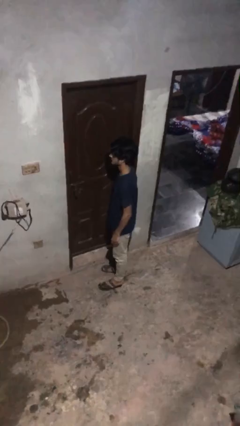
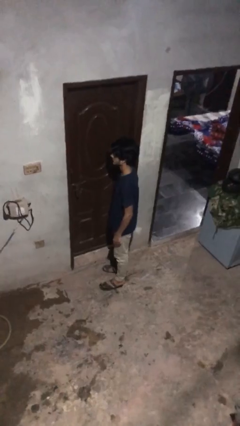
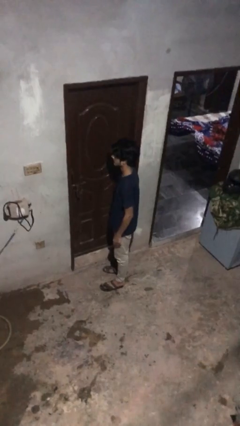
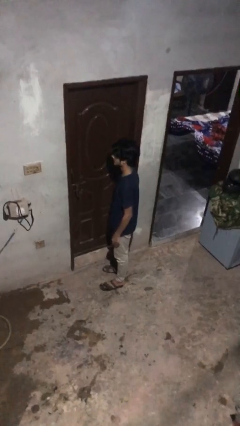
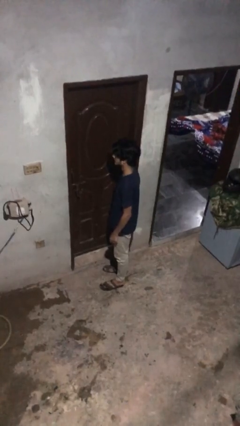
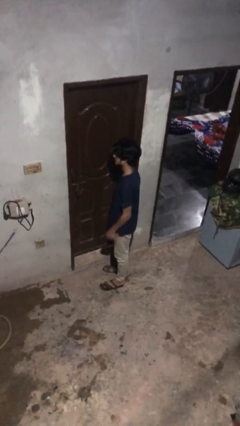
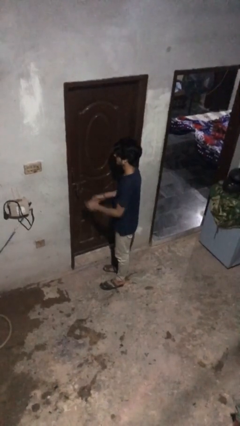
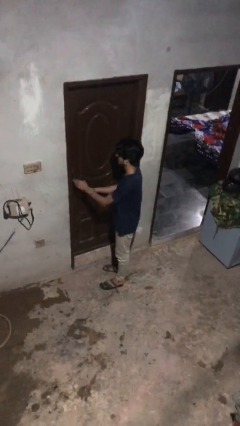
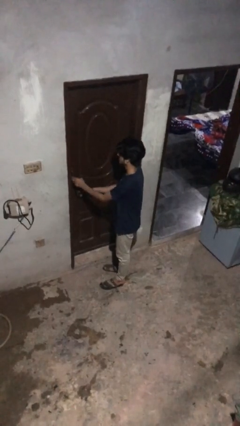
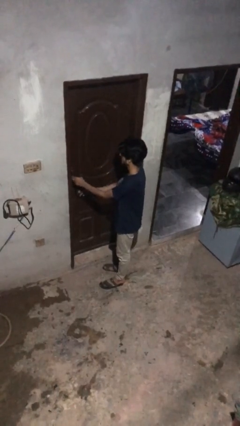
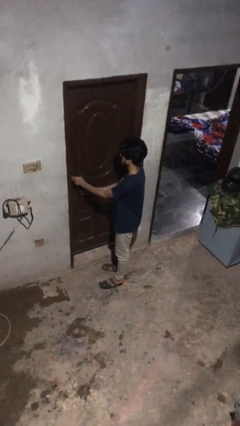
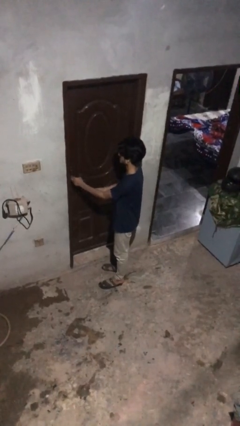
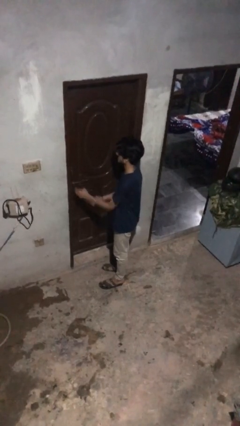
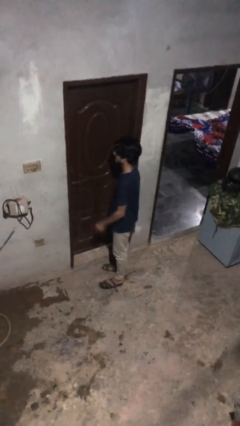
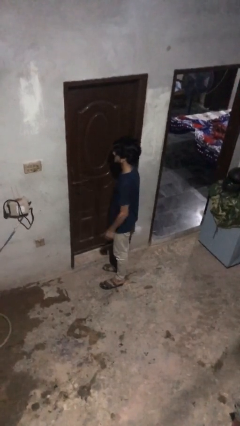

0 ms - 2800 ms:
person unlocks door with keys

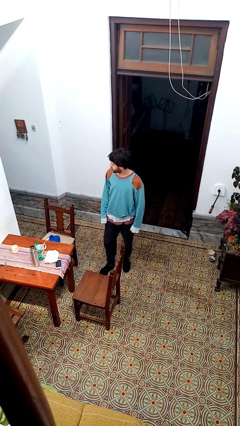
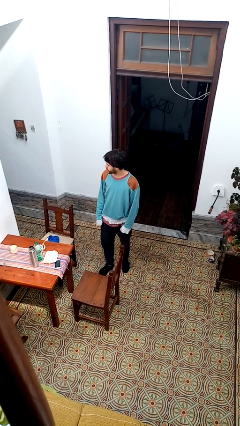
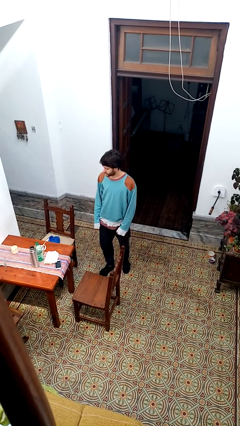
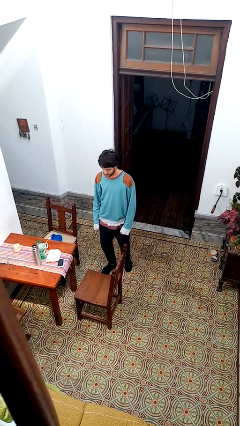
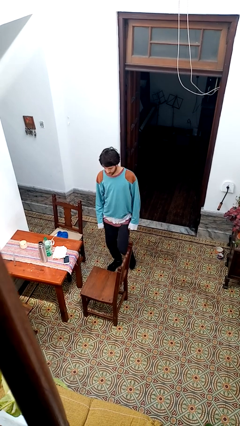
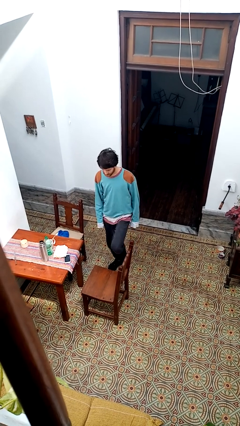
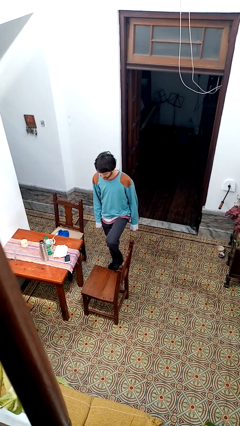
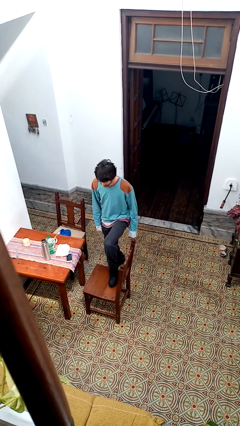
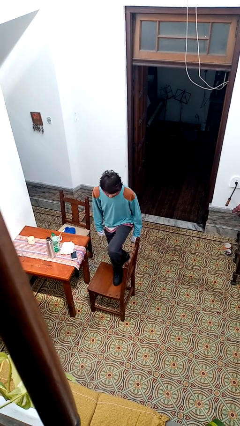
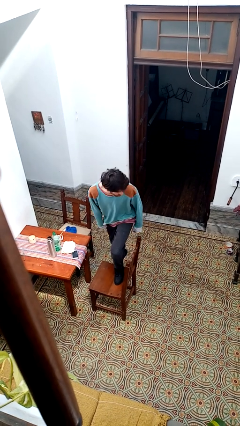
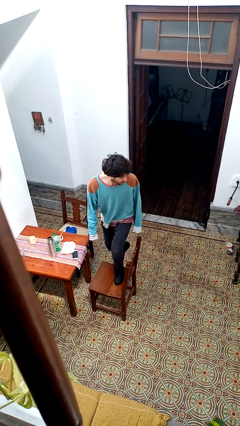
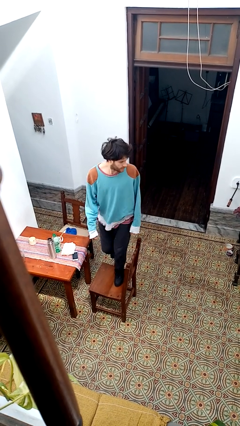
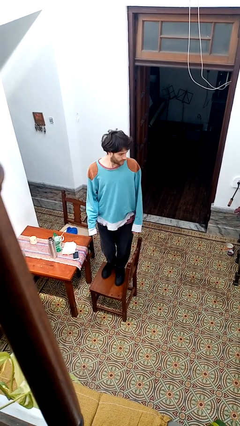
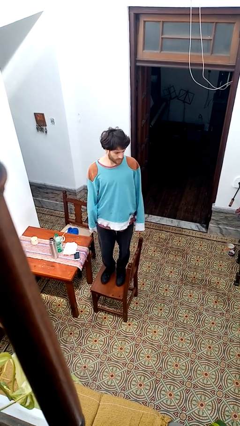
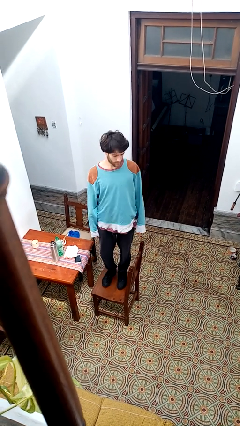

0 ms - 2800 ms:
person climbs on chair

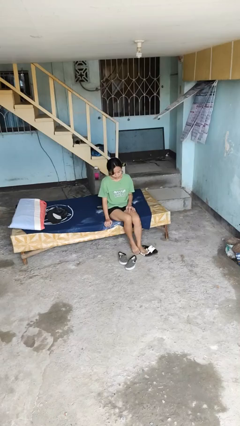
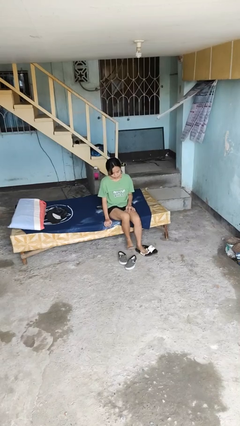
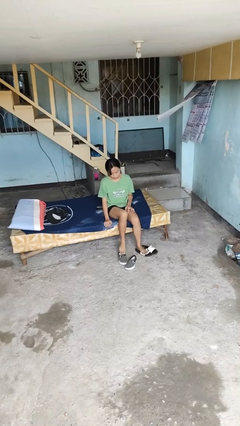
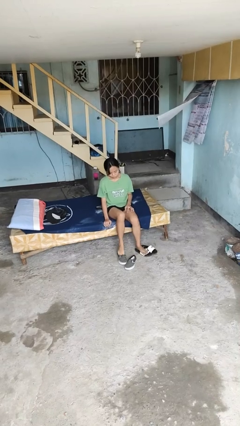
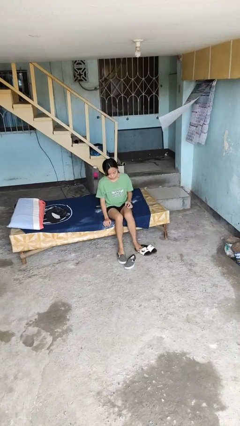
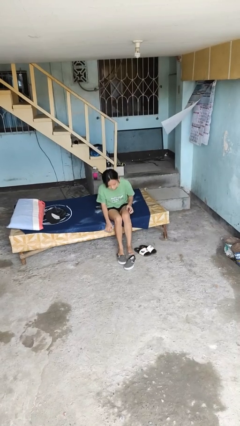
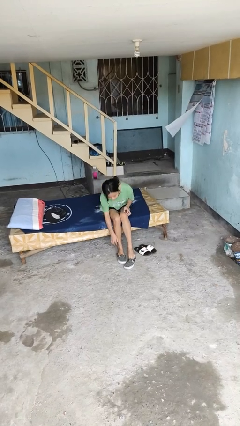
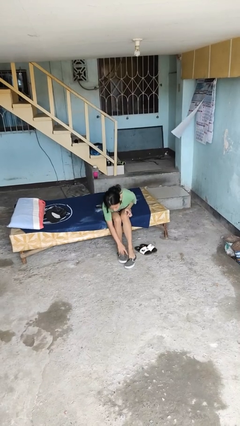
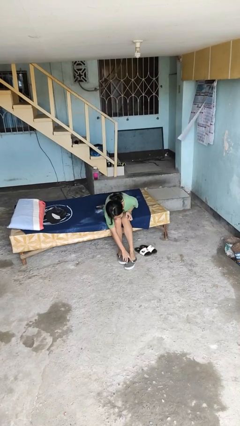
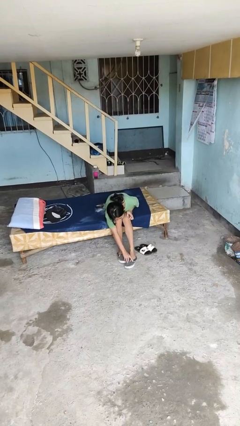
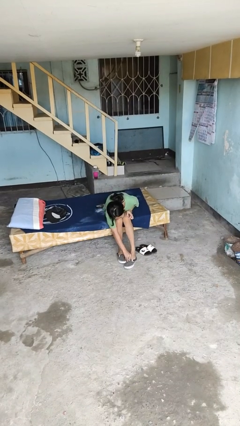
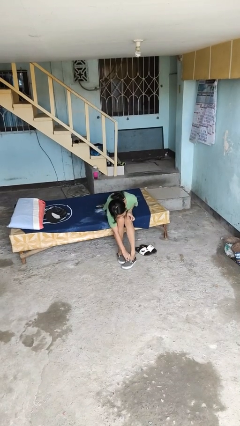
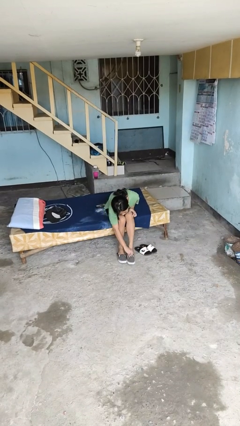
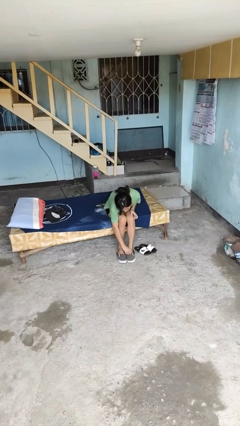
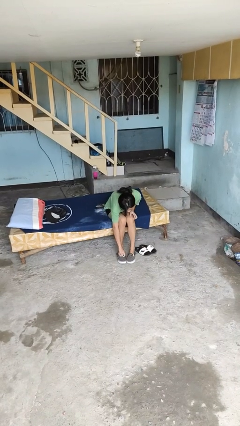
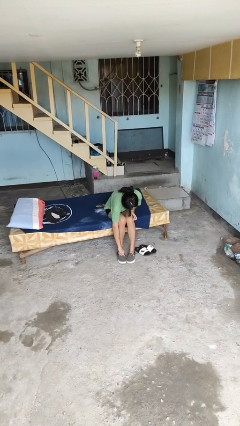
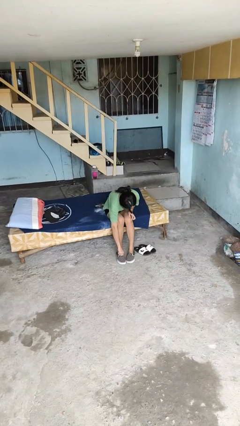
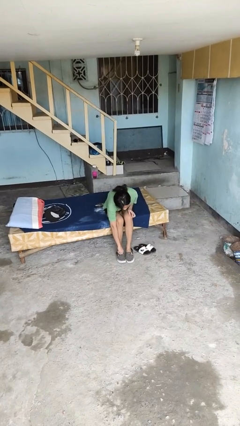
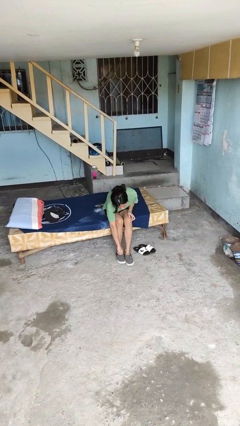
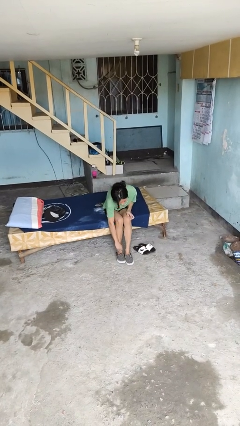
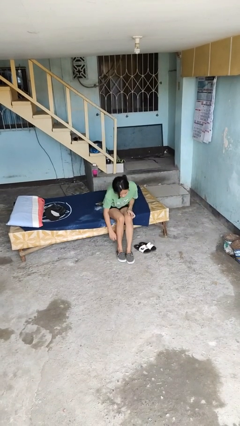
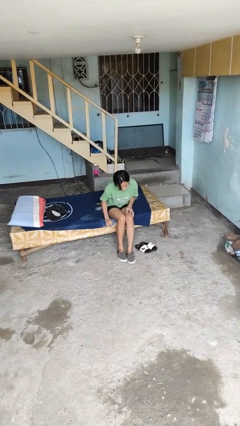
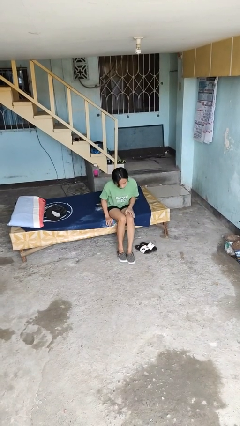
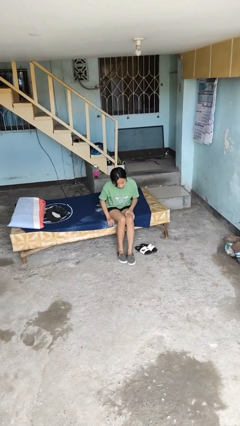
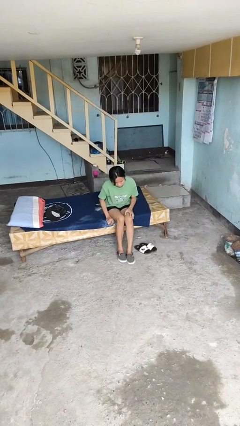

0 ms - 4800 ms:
person puts on shoes

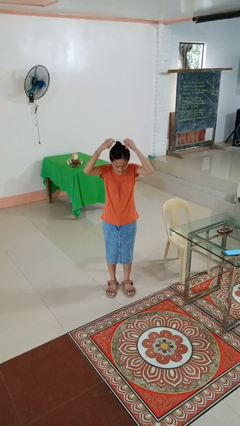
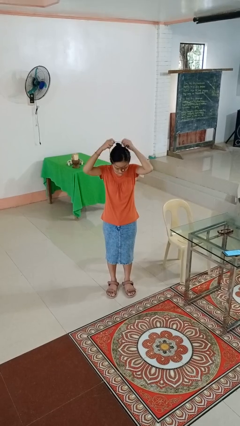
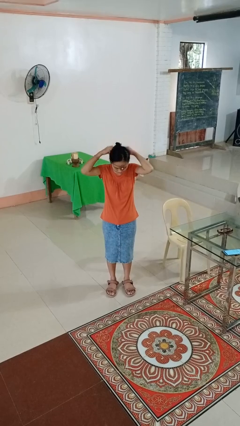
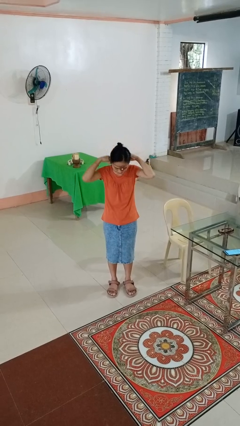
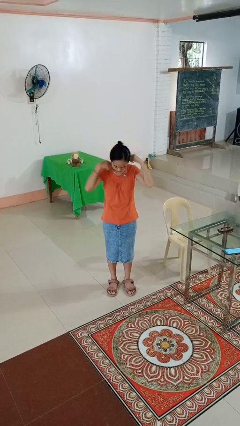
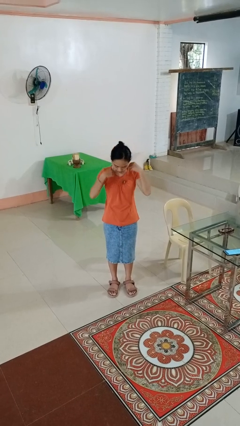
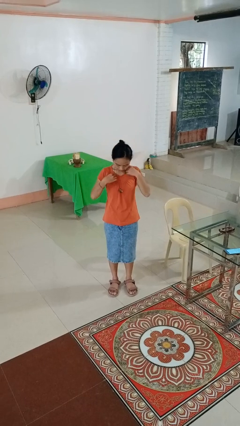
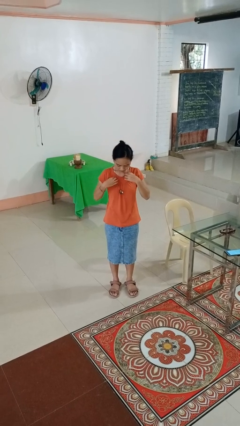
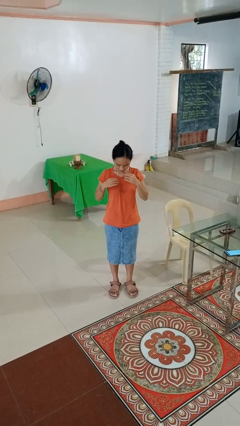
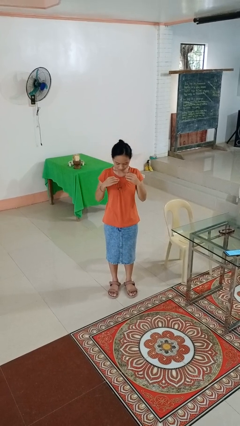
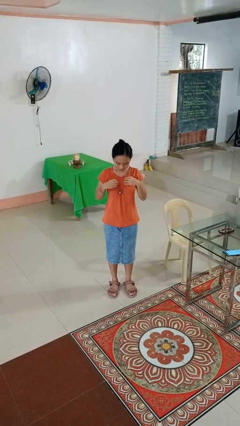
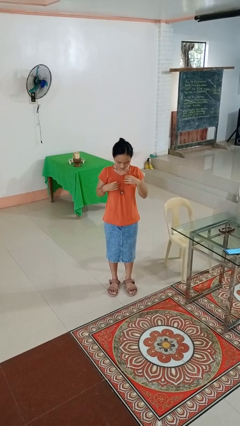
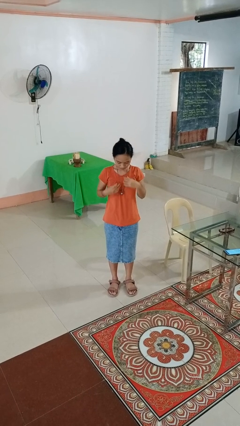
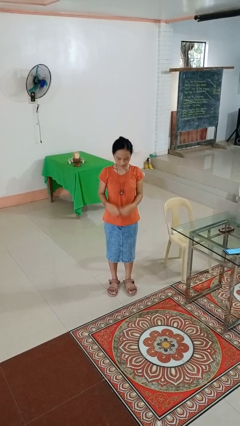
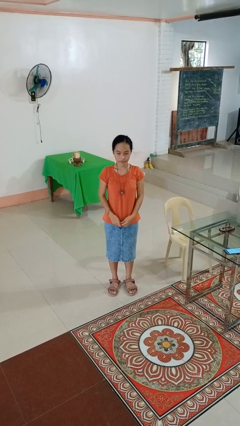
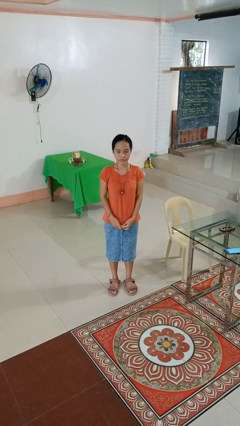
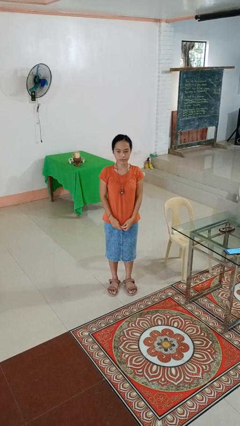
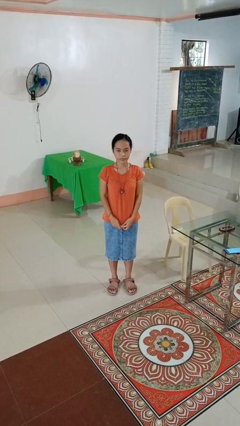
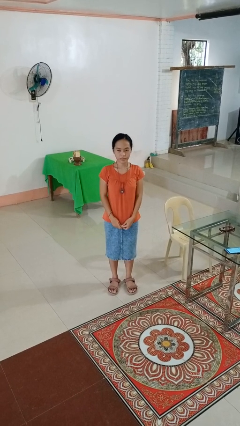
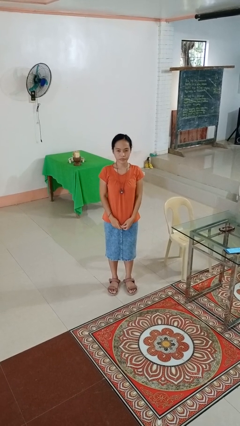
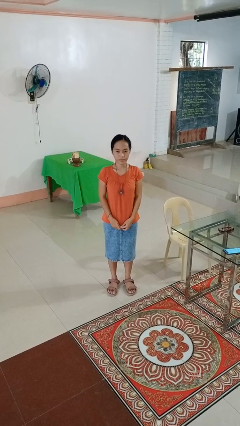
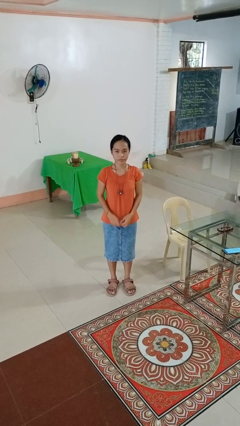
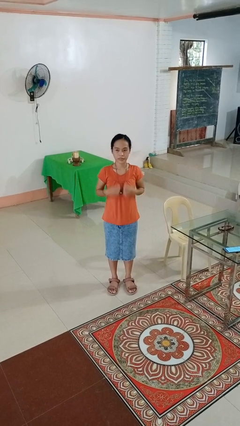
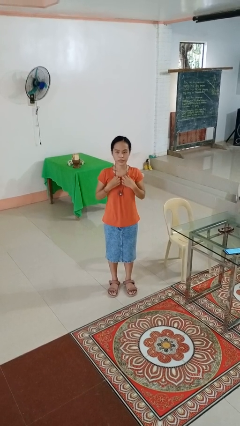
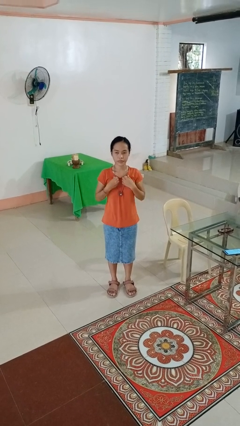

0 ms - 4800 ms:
person puts on necklace

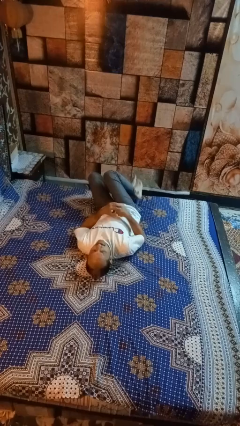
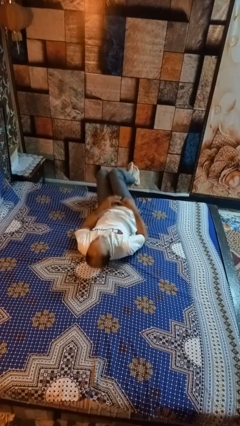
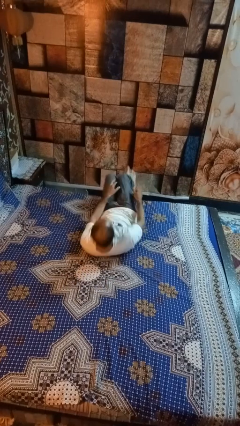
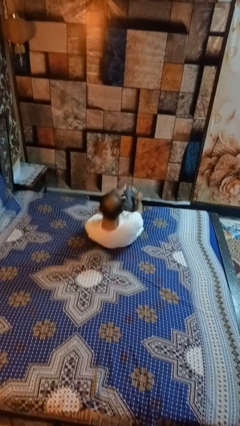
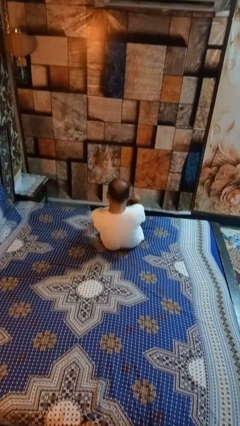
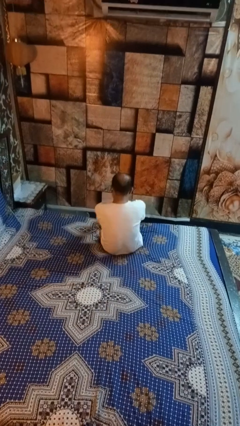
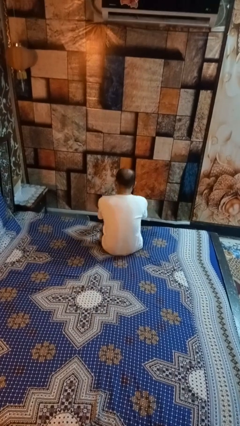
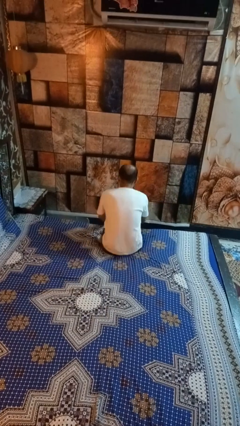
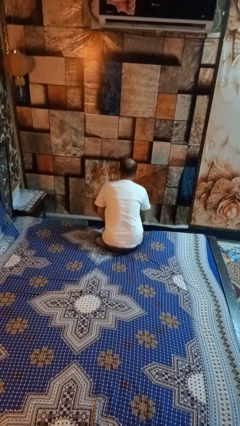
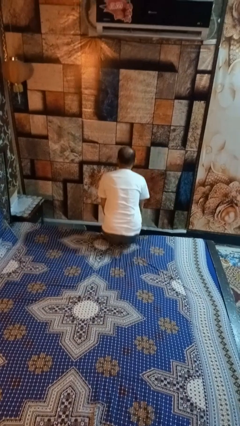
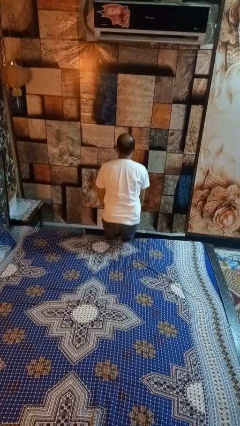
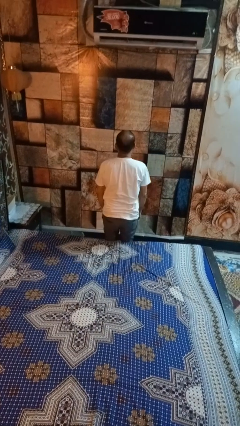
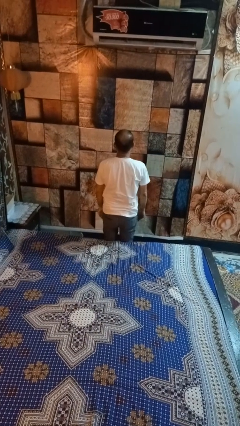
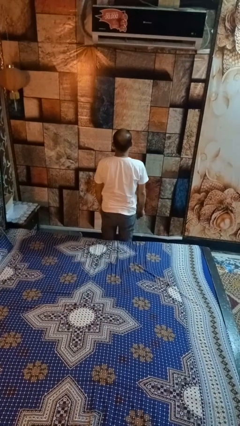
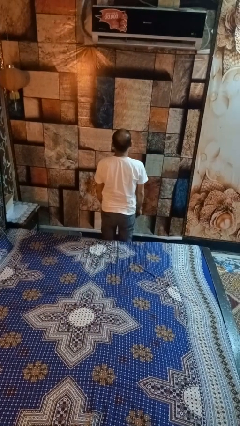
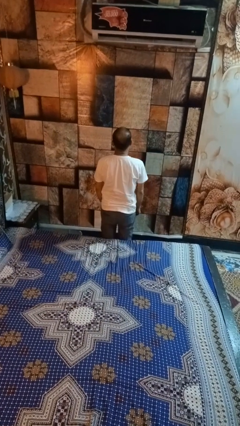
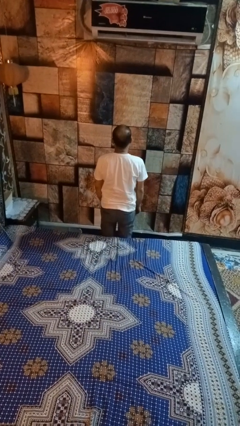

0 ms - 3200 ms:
person stands up
